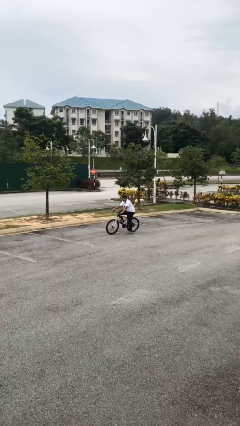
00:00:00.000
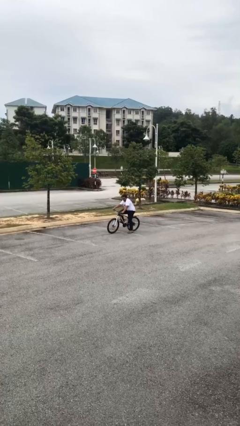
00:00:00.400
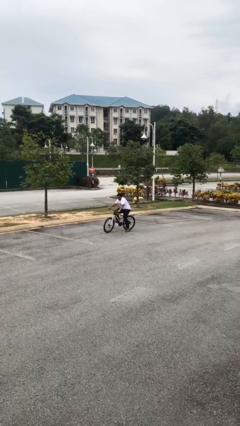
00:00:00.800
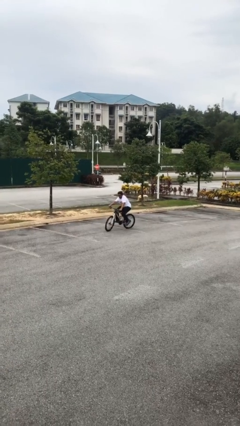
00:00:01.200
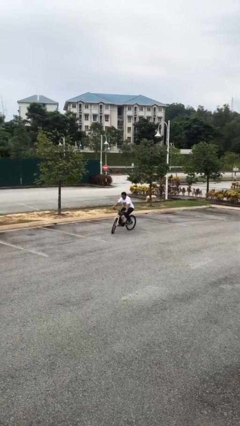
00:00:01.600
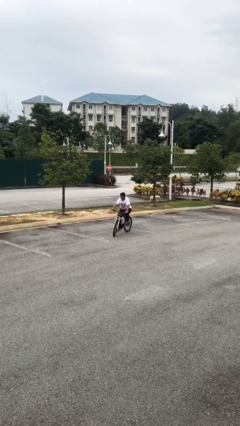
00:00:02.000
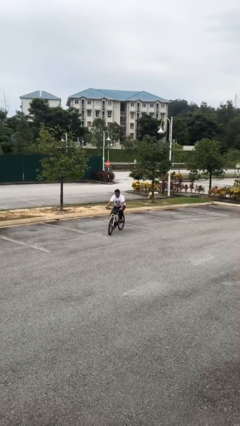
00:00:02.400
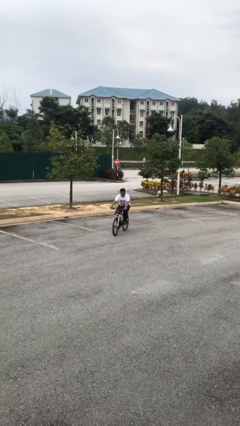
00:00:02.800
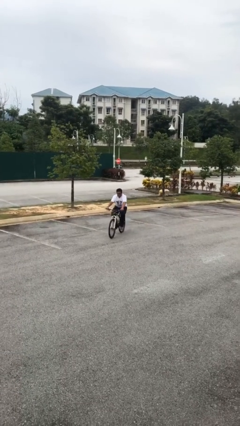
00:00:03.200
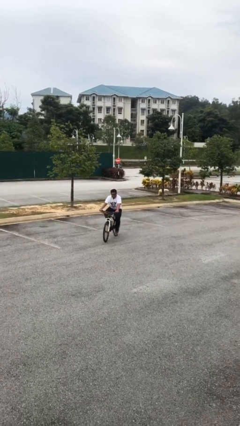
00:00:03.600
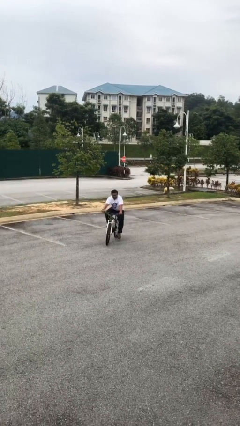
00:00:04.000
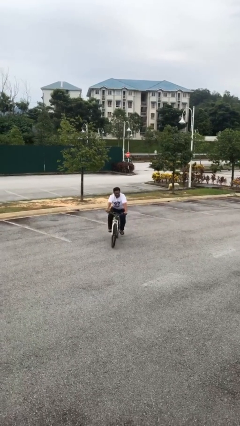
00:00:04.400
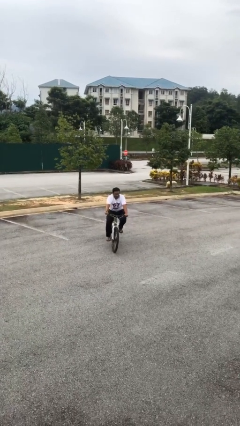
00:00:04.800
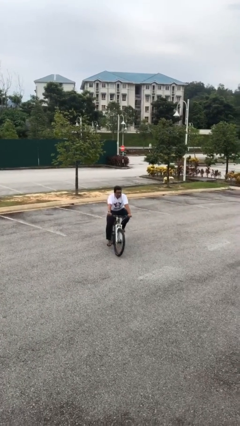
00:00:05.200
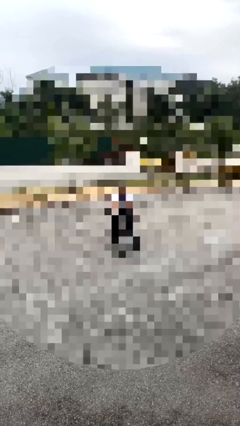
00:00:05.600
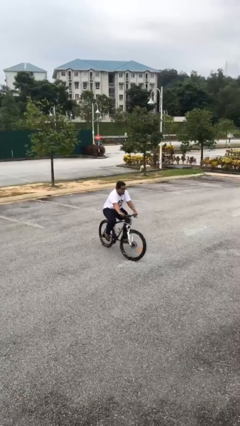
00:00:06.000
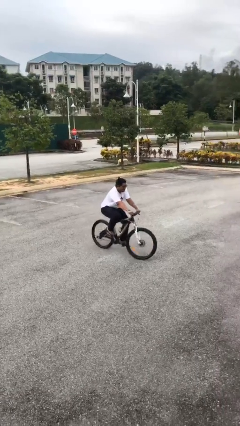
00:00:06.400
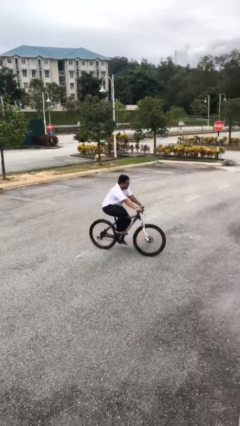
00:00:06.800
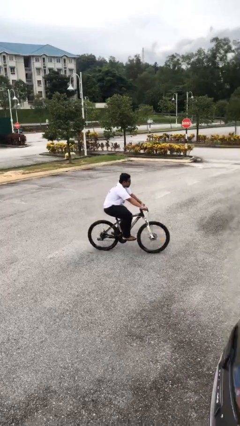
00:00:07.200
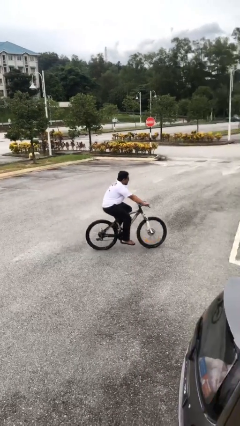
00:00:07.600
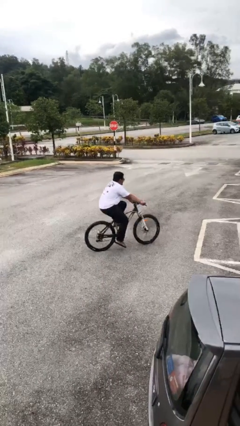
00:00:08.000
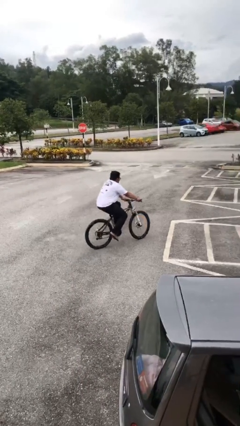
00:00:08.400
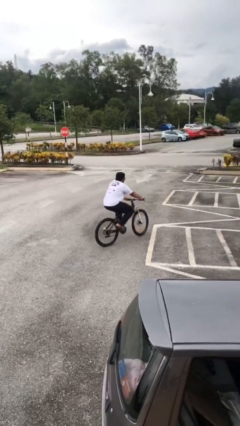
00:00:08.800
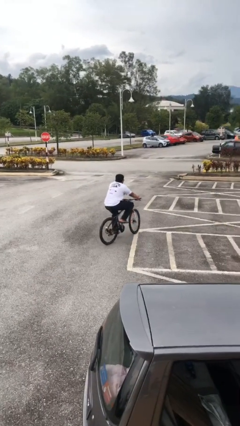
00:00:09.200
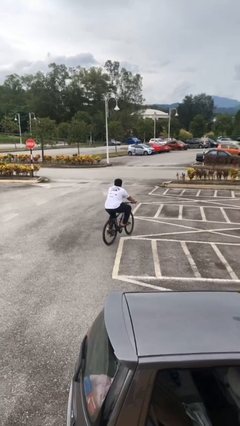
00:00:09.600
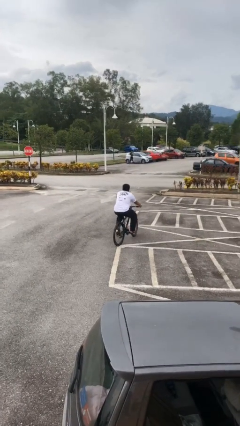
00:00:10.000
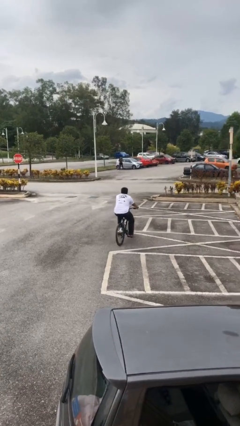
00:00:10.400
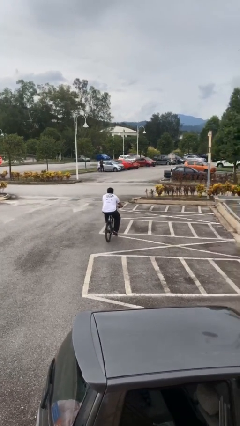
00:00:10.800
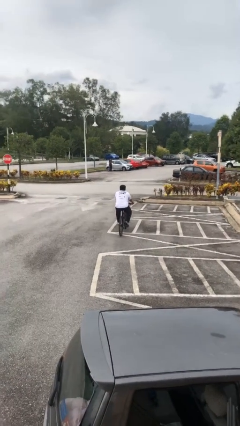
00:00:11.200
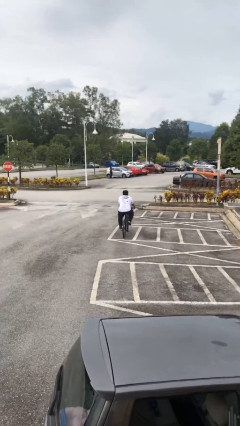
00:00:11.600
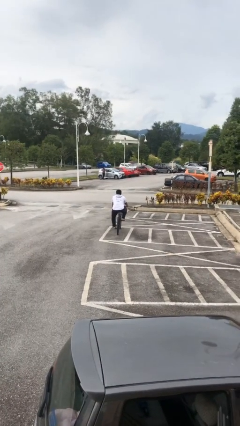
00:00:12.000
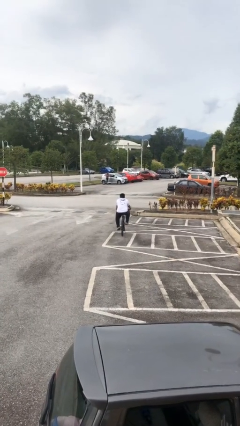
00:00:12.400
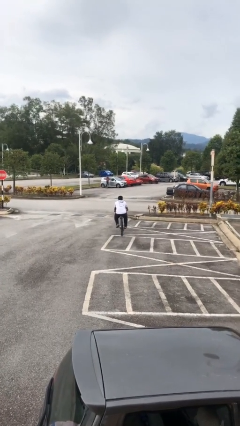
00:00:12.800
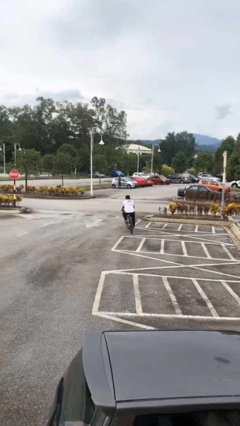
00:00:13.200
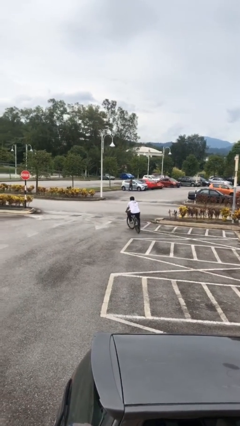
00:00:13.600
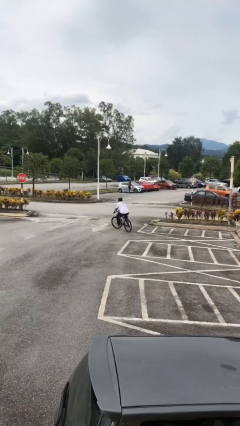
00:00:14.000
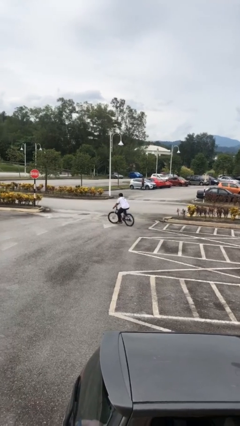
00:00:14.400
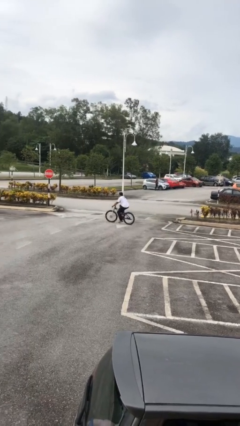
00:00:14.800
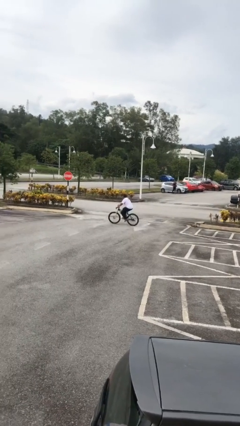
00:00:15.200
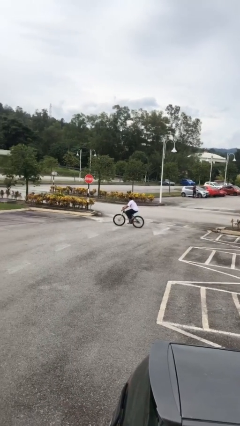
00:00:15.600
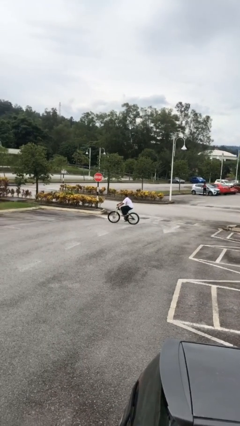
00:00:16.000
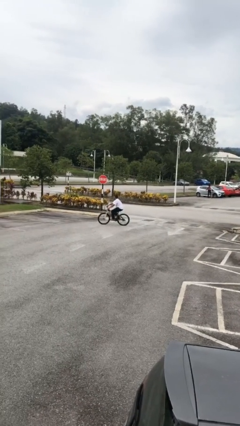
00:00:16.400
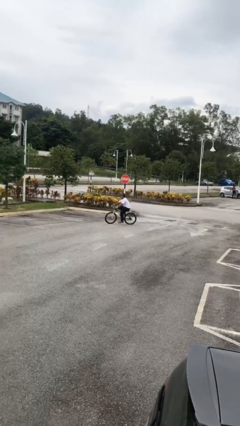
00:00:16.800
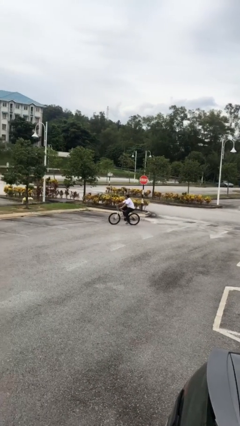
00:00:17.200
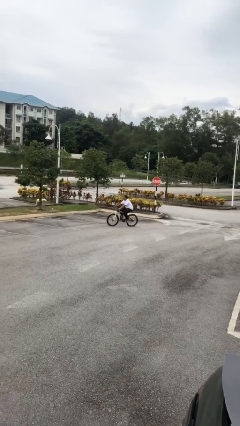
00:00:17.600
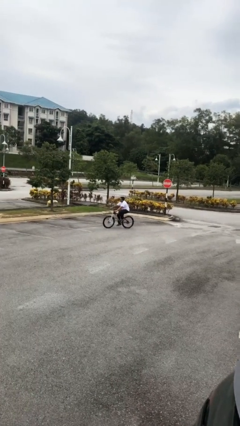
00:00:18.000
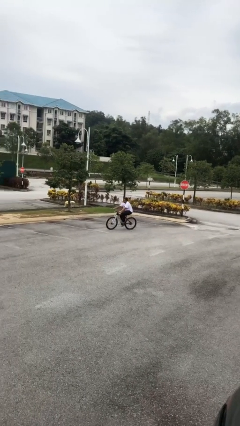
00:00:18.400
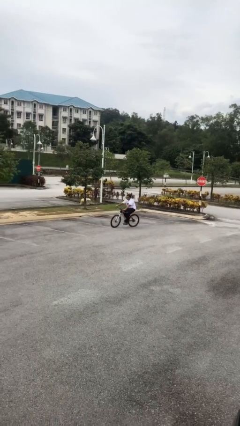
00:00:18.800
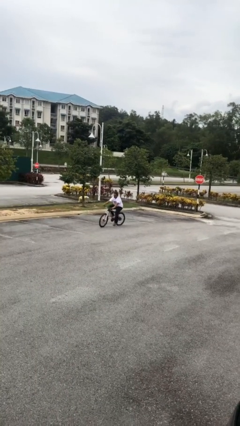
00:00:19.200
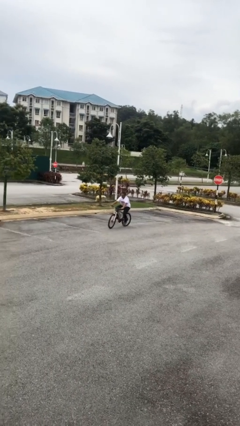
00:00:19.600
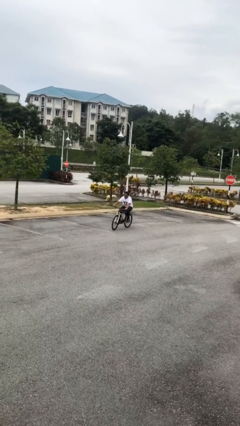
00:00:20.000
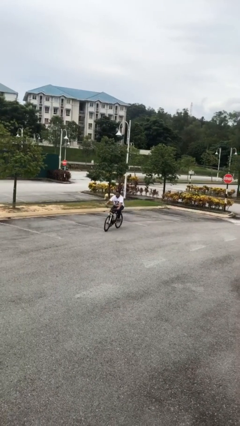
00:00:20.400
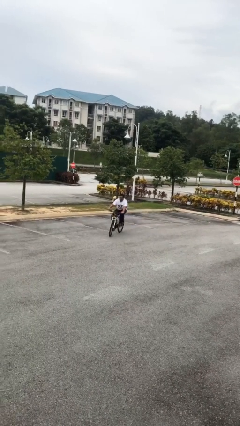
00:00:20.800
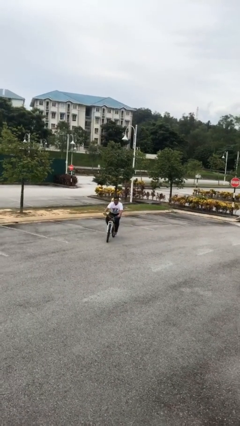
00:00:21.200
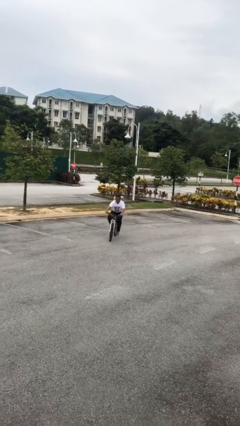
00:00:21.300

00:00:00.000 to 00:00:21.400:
person rides bicycle

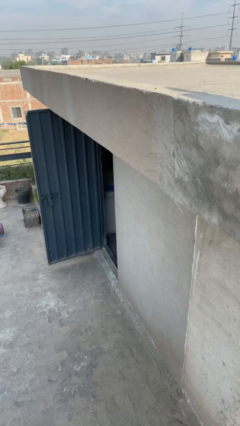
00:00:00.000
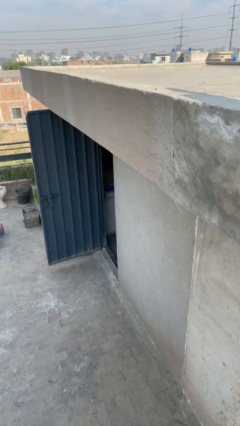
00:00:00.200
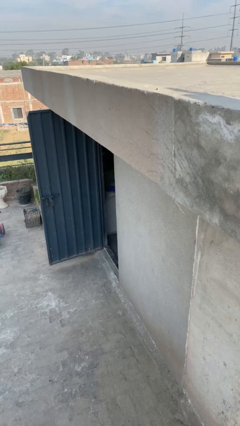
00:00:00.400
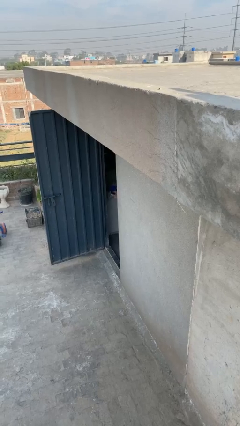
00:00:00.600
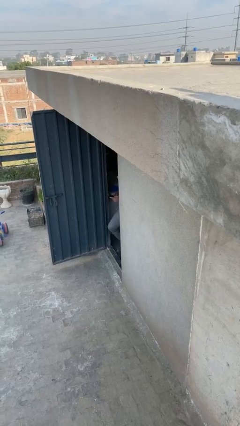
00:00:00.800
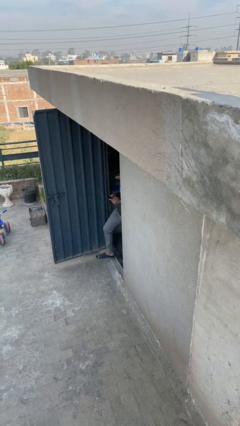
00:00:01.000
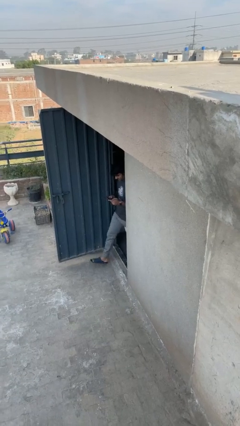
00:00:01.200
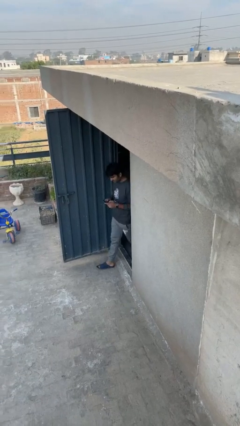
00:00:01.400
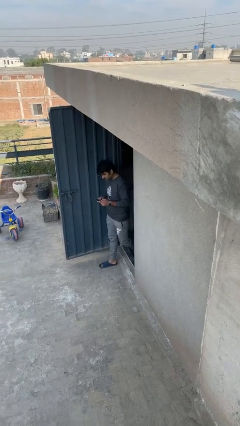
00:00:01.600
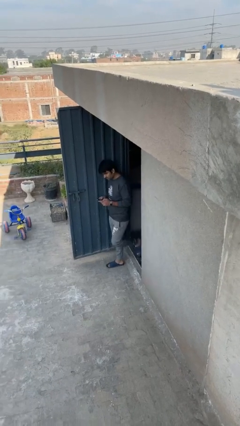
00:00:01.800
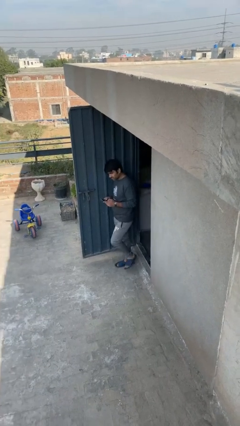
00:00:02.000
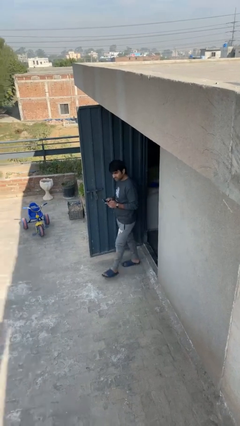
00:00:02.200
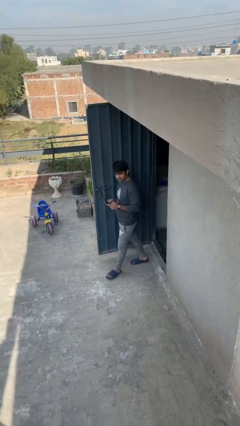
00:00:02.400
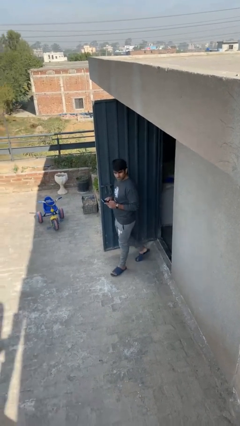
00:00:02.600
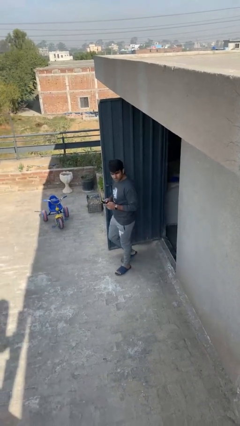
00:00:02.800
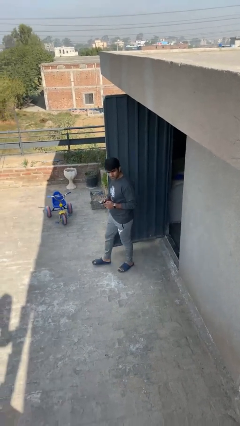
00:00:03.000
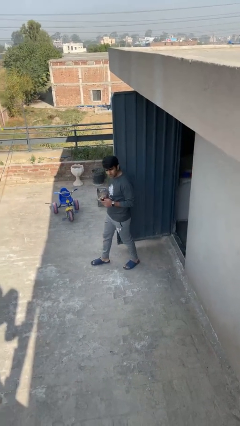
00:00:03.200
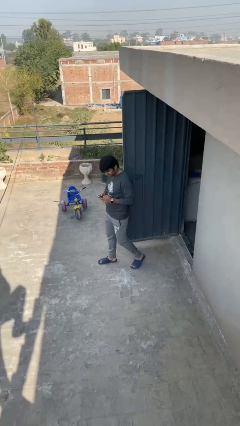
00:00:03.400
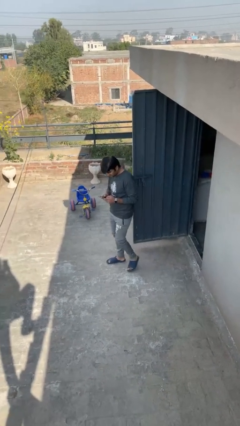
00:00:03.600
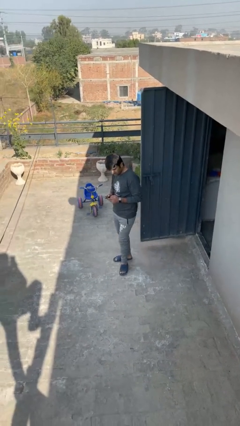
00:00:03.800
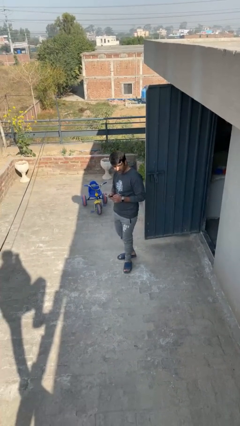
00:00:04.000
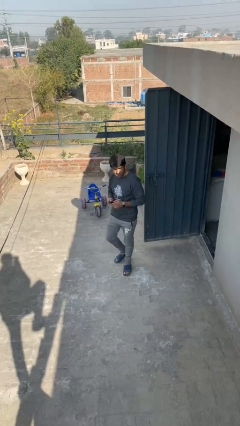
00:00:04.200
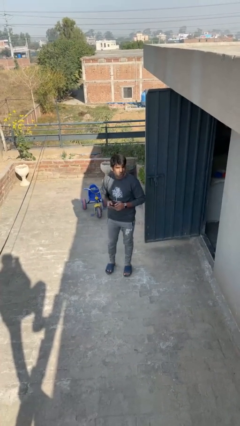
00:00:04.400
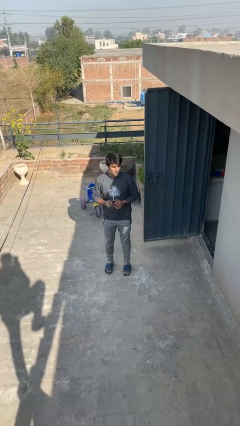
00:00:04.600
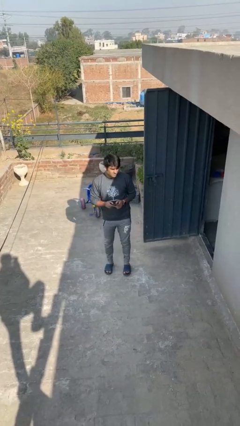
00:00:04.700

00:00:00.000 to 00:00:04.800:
person enters scene through structure

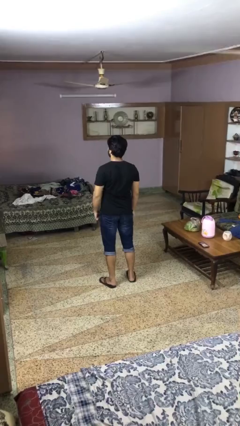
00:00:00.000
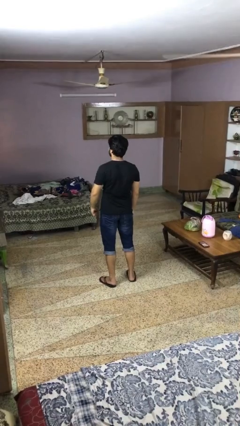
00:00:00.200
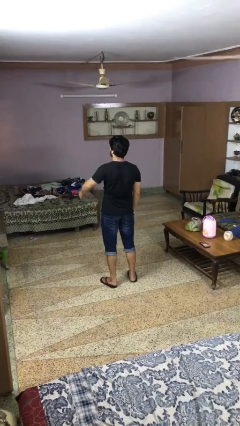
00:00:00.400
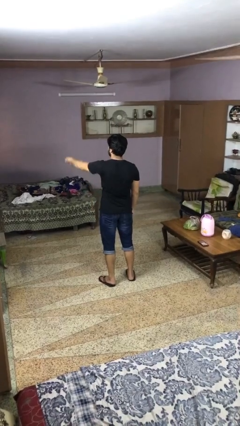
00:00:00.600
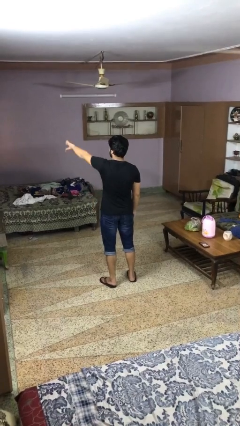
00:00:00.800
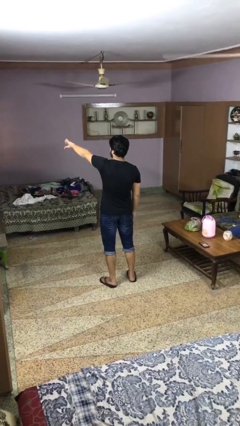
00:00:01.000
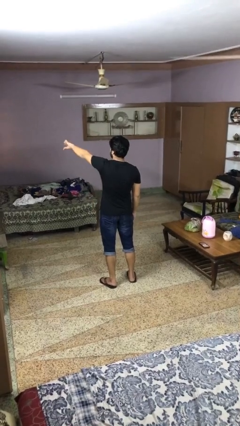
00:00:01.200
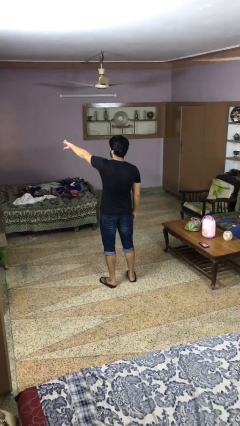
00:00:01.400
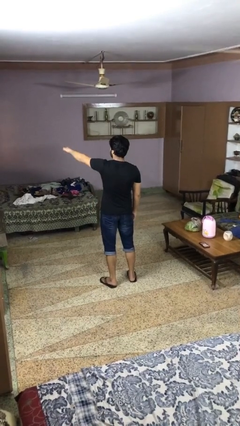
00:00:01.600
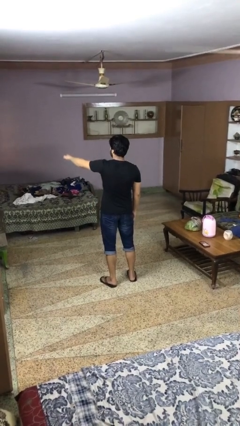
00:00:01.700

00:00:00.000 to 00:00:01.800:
person gestures thumbs down

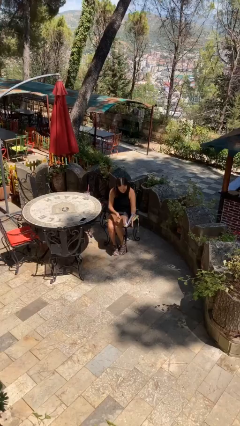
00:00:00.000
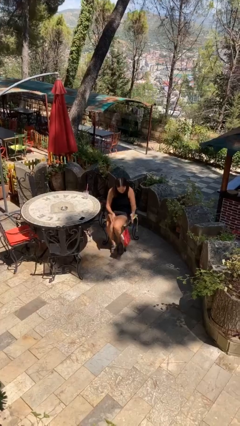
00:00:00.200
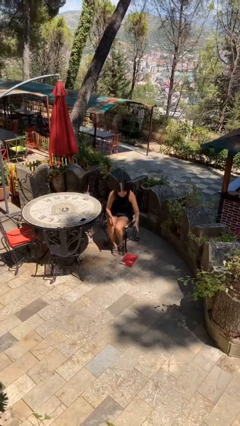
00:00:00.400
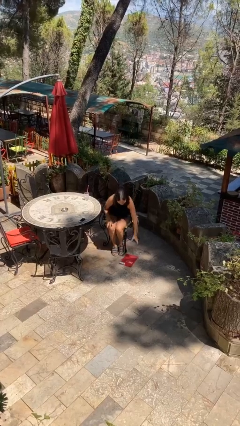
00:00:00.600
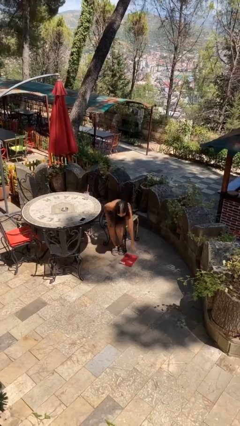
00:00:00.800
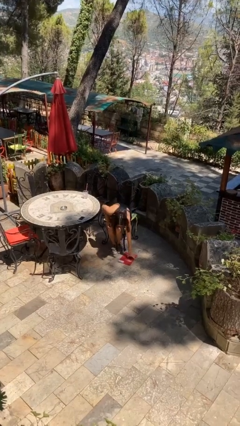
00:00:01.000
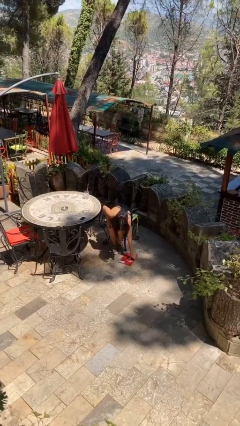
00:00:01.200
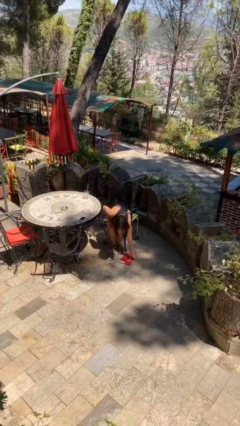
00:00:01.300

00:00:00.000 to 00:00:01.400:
person drops object
